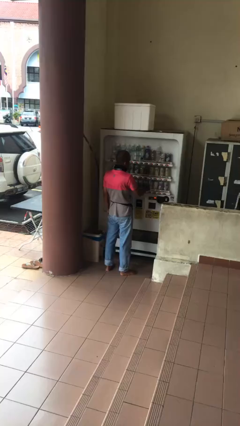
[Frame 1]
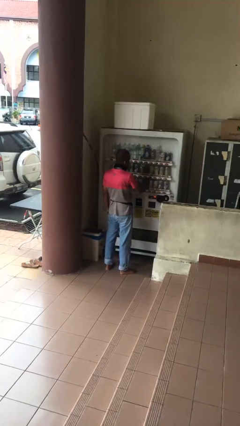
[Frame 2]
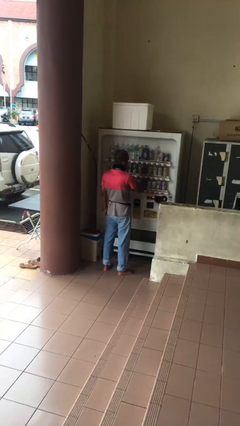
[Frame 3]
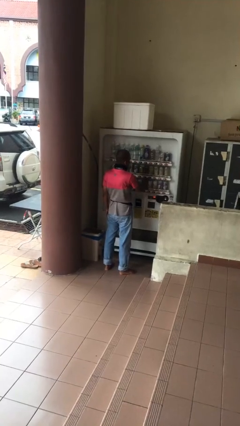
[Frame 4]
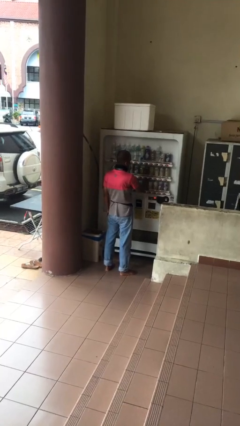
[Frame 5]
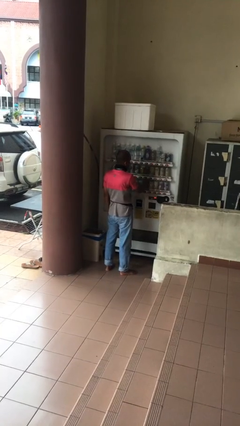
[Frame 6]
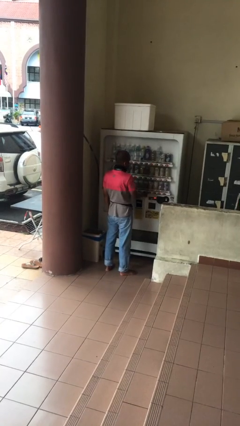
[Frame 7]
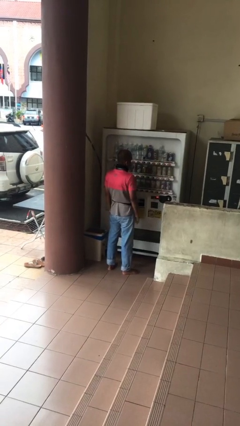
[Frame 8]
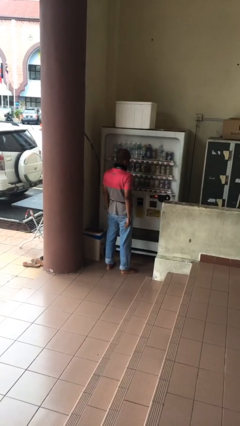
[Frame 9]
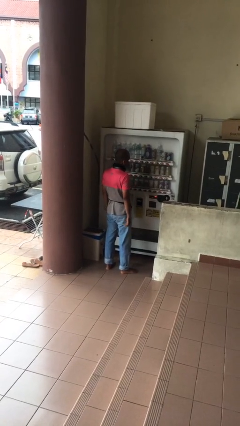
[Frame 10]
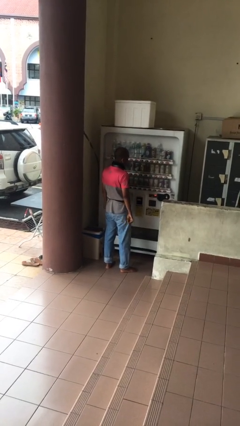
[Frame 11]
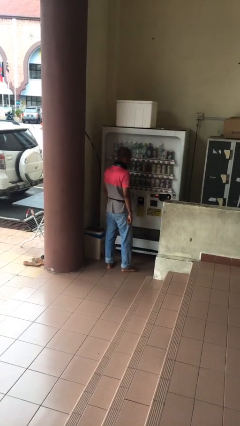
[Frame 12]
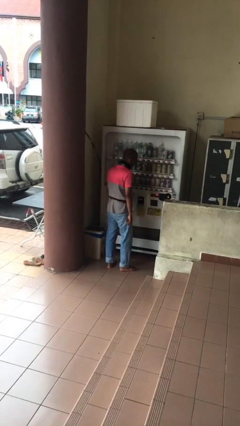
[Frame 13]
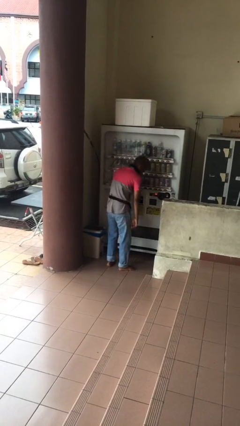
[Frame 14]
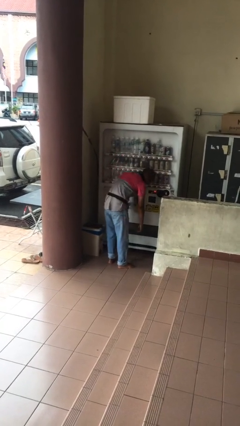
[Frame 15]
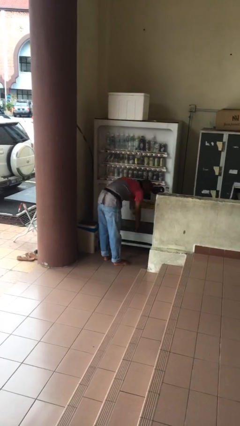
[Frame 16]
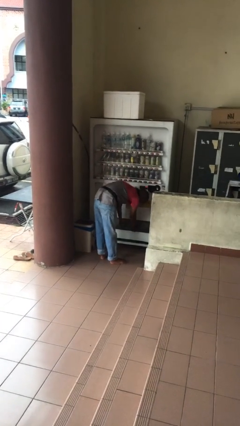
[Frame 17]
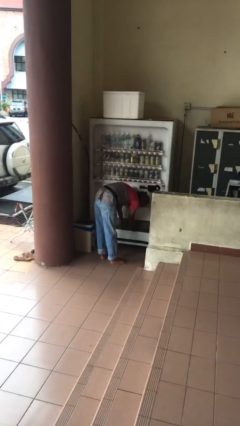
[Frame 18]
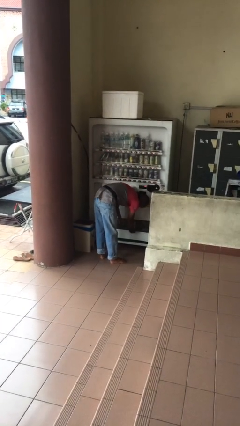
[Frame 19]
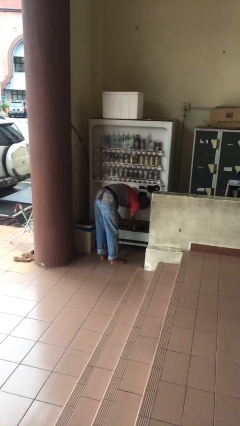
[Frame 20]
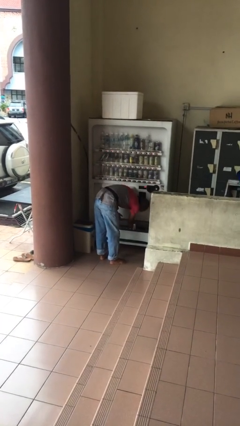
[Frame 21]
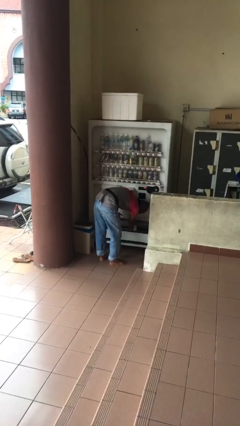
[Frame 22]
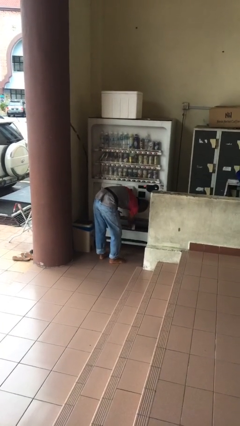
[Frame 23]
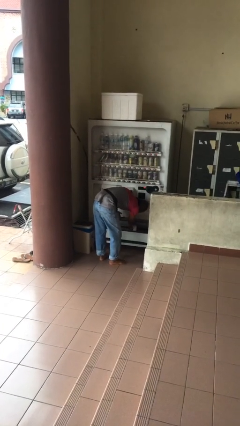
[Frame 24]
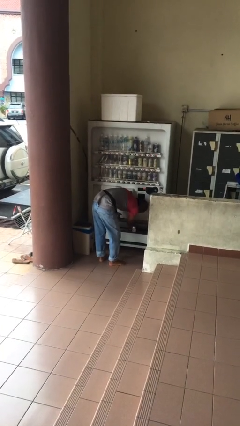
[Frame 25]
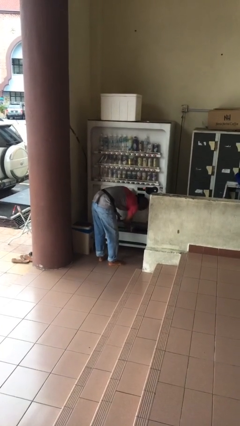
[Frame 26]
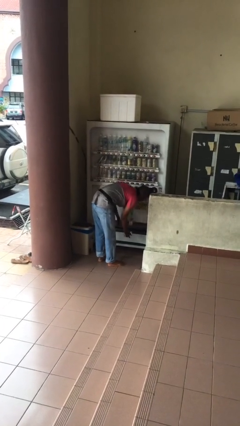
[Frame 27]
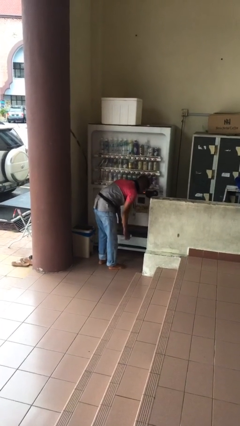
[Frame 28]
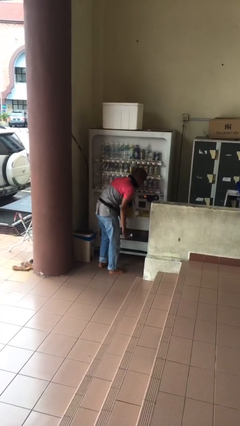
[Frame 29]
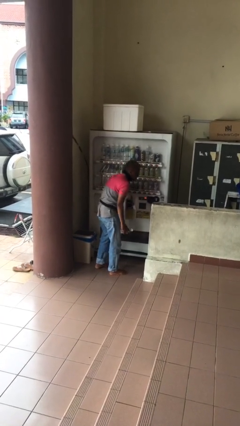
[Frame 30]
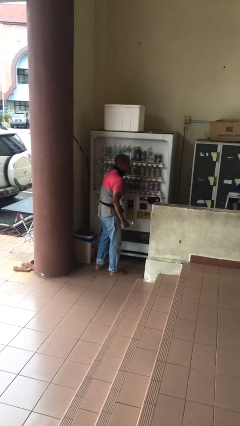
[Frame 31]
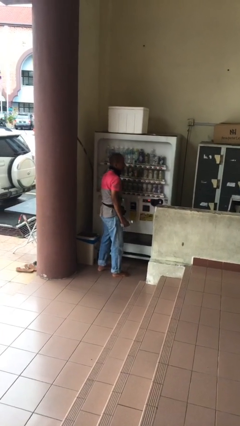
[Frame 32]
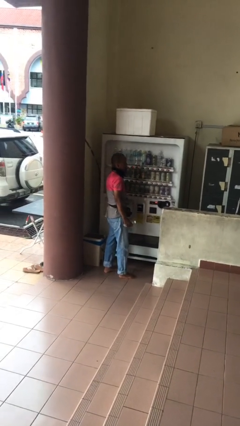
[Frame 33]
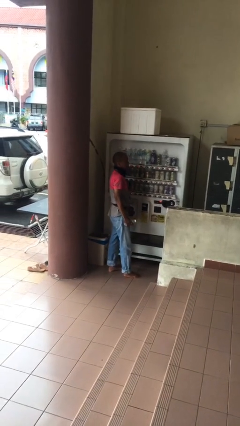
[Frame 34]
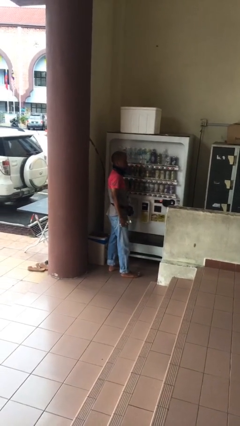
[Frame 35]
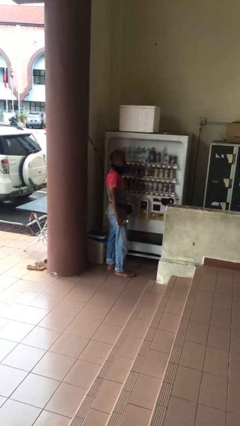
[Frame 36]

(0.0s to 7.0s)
person purchases from machine

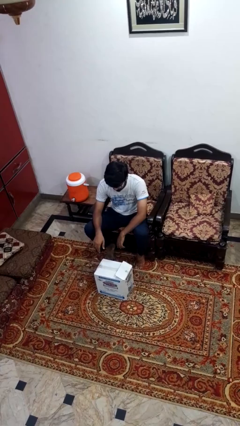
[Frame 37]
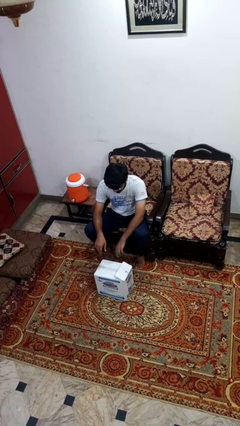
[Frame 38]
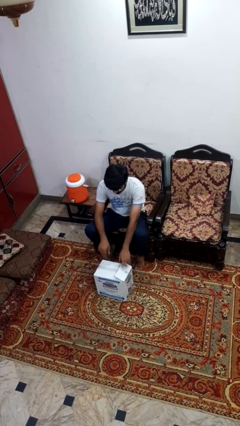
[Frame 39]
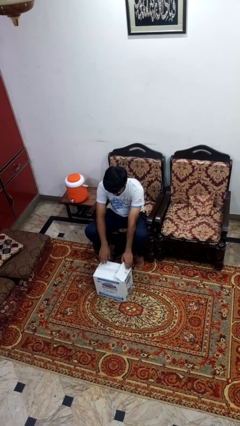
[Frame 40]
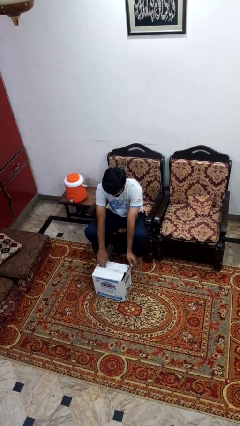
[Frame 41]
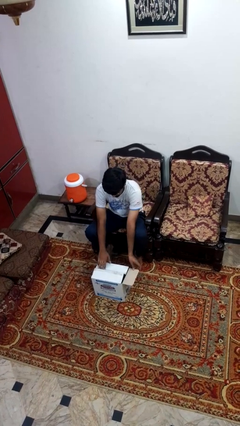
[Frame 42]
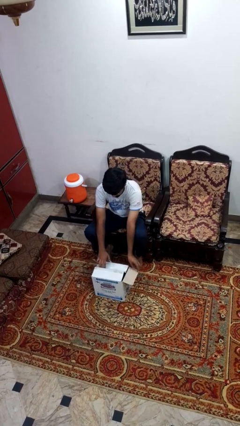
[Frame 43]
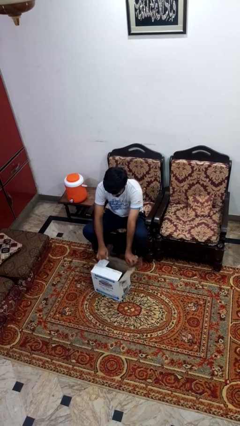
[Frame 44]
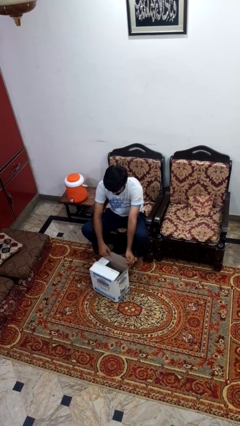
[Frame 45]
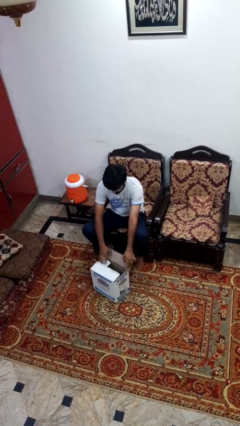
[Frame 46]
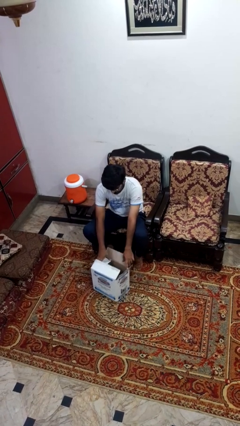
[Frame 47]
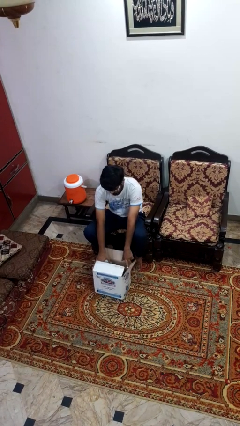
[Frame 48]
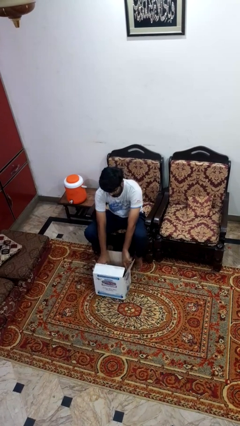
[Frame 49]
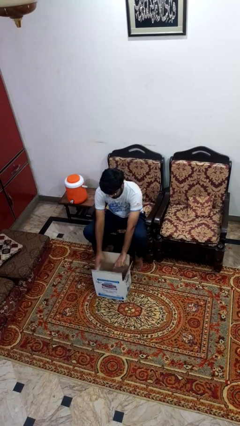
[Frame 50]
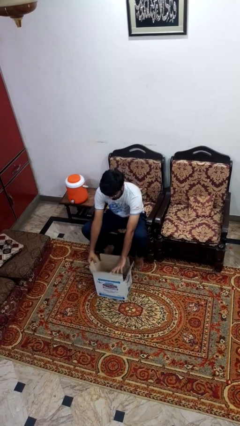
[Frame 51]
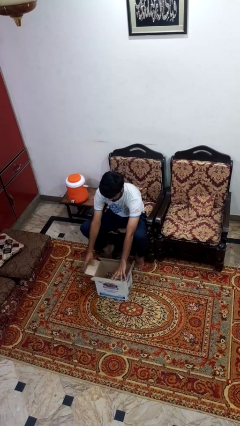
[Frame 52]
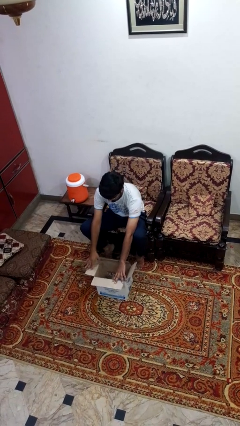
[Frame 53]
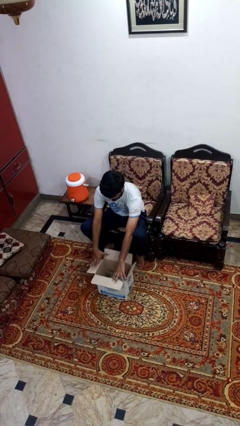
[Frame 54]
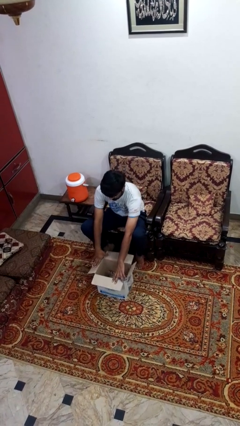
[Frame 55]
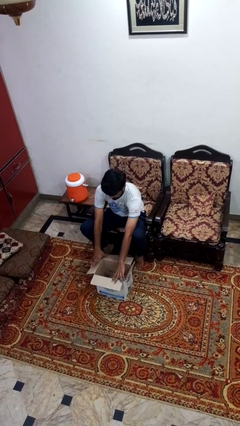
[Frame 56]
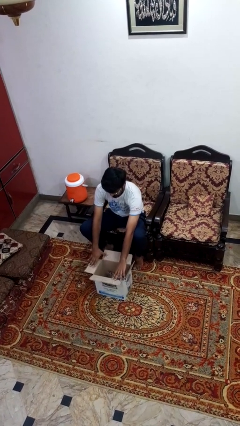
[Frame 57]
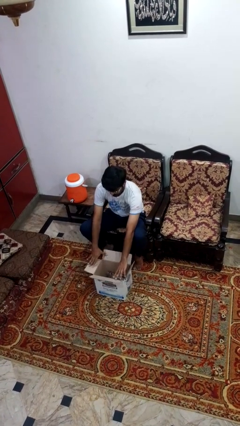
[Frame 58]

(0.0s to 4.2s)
person opens box

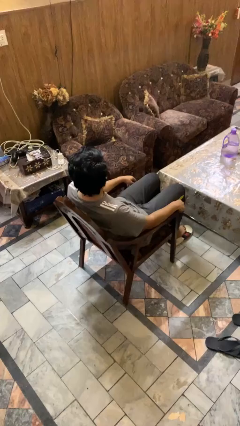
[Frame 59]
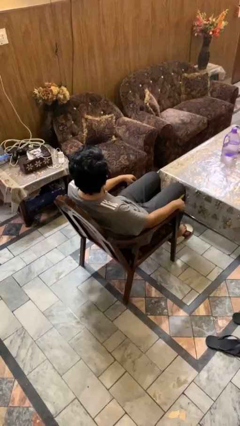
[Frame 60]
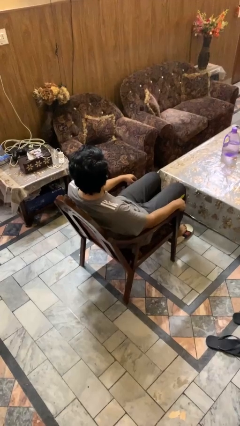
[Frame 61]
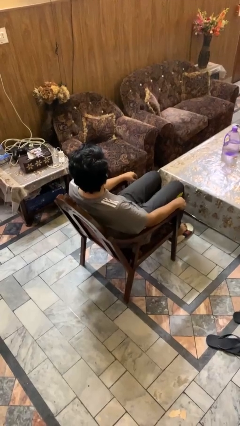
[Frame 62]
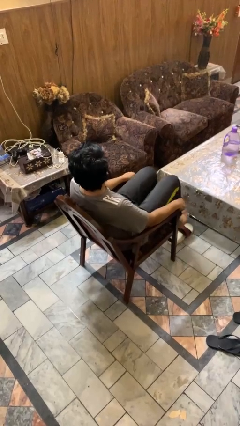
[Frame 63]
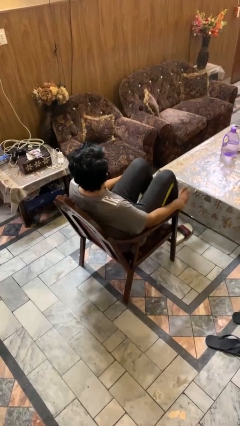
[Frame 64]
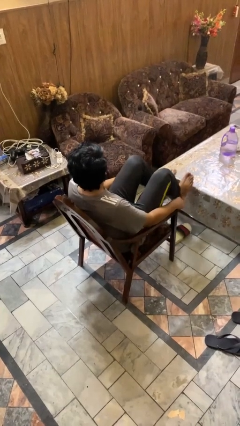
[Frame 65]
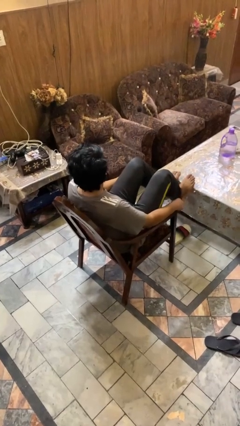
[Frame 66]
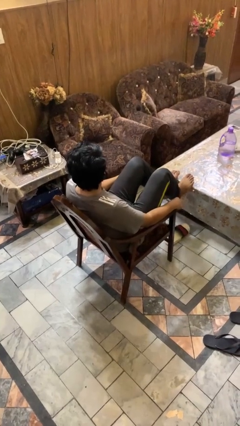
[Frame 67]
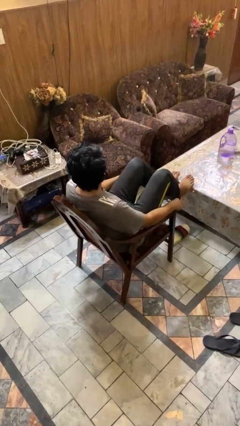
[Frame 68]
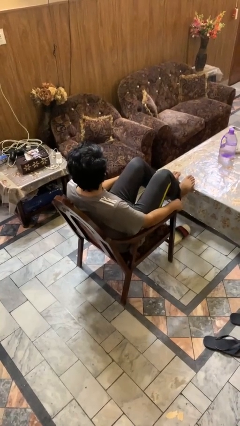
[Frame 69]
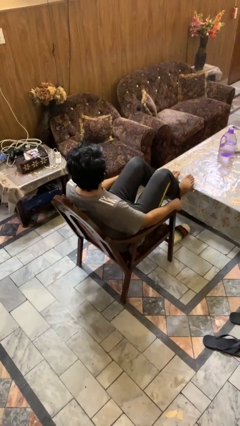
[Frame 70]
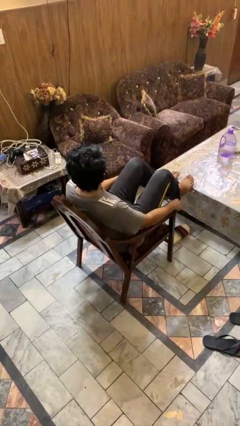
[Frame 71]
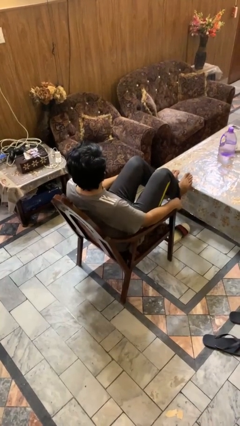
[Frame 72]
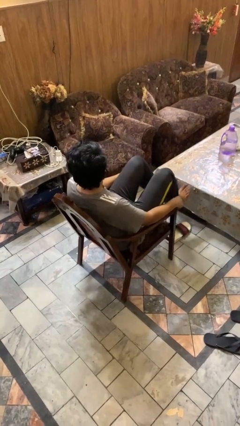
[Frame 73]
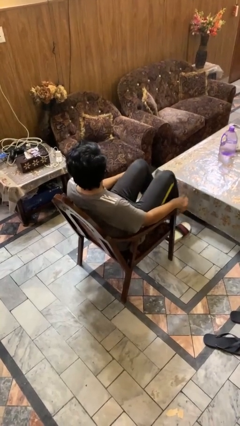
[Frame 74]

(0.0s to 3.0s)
person puts feet up

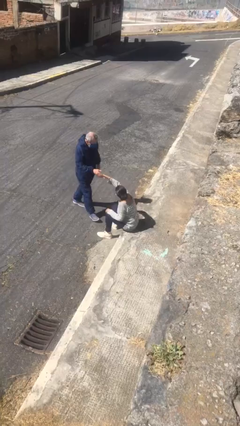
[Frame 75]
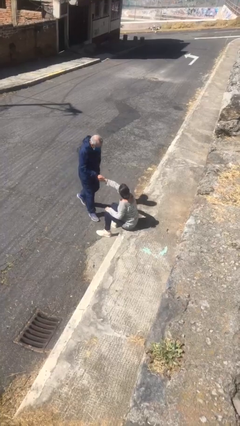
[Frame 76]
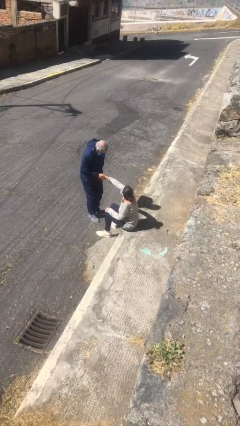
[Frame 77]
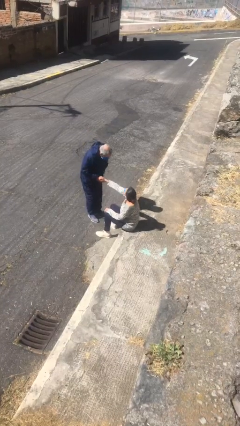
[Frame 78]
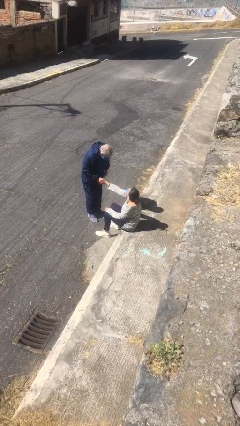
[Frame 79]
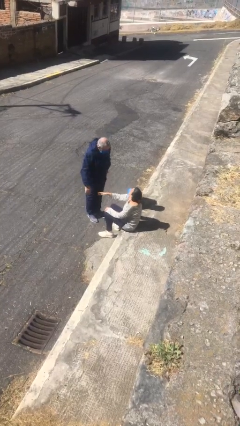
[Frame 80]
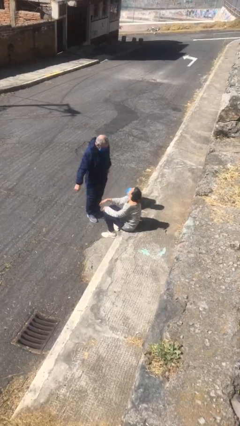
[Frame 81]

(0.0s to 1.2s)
person shakes hand

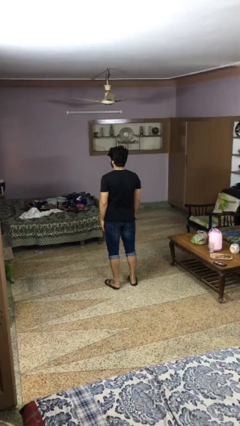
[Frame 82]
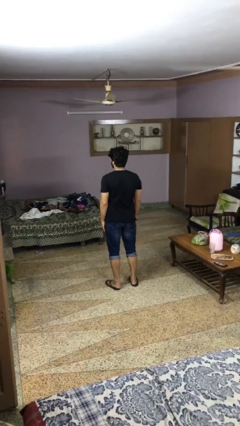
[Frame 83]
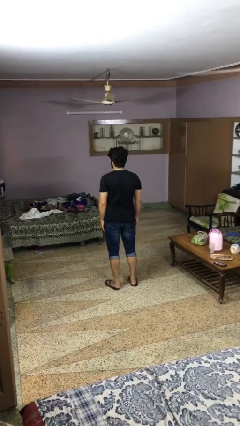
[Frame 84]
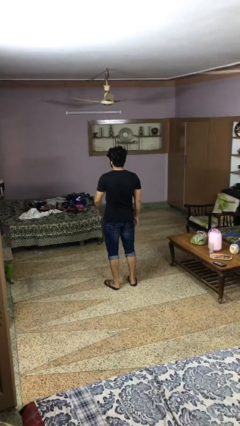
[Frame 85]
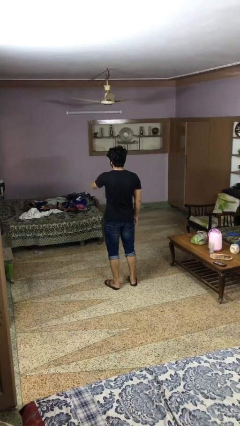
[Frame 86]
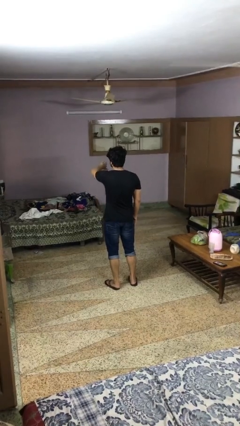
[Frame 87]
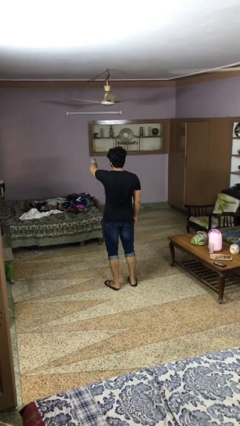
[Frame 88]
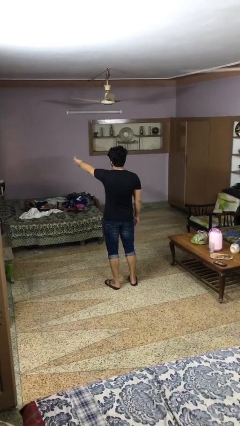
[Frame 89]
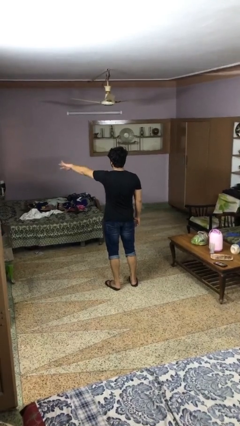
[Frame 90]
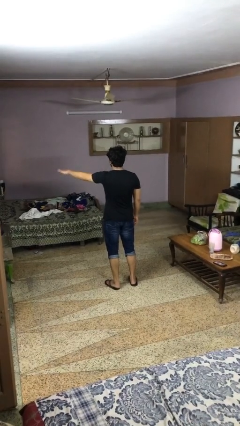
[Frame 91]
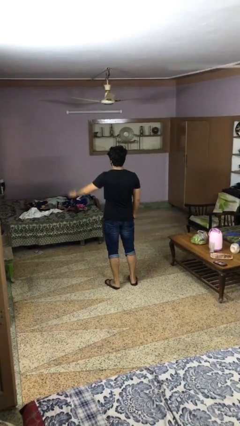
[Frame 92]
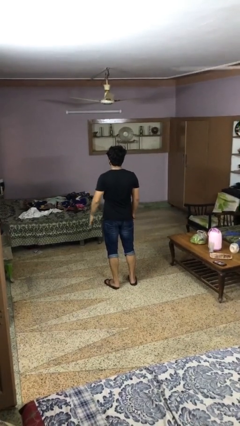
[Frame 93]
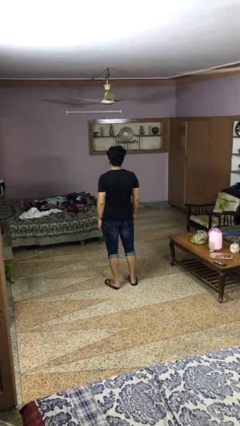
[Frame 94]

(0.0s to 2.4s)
person gestures swipe left
